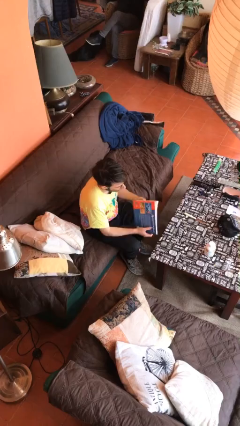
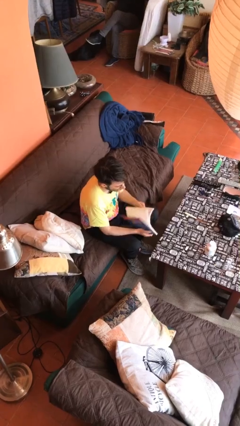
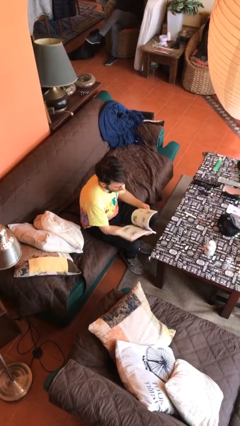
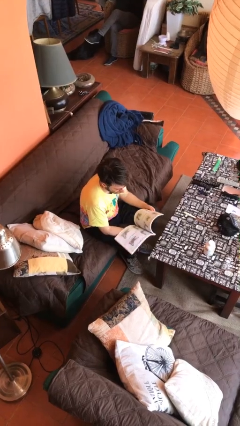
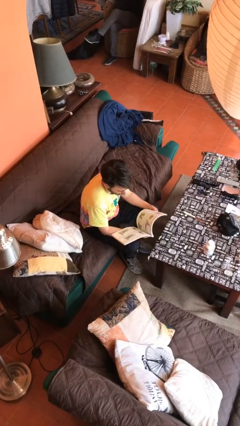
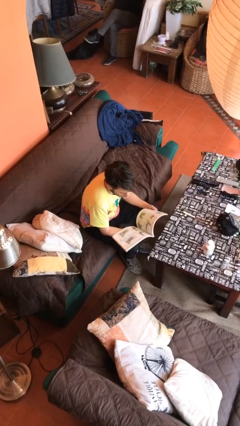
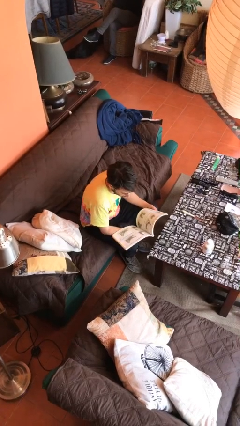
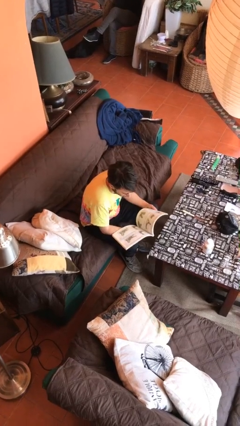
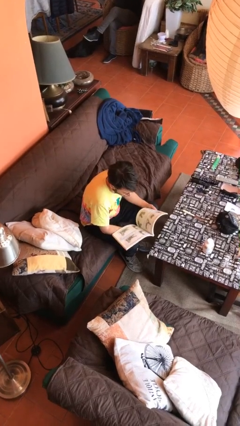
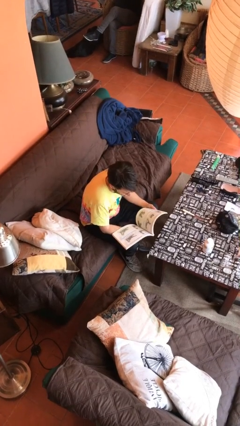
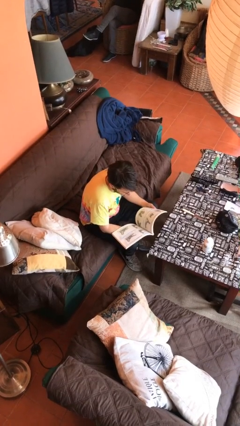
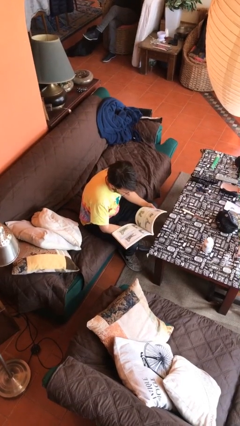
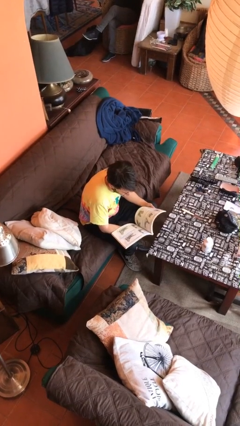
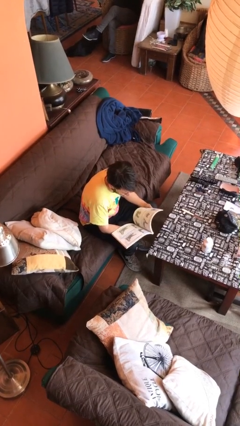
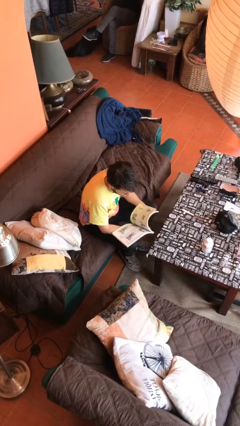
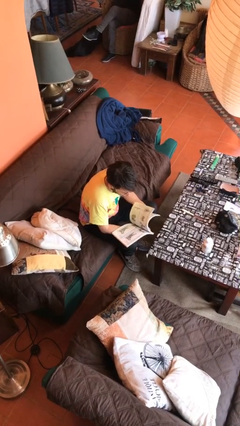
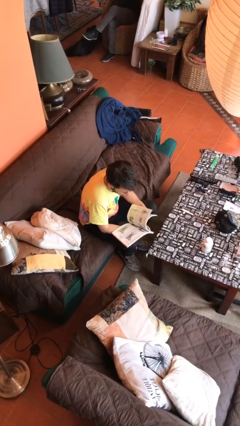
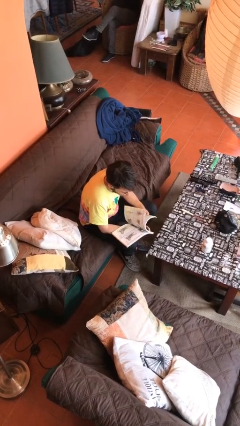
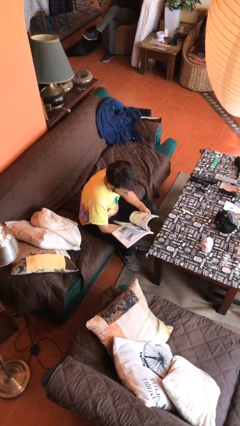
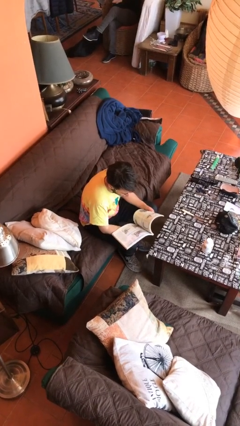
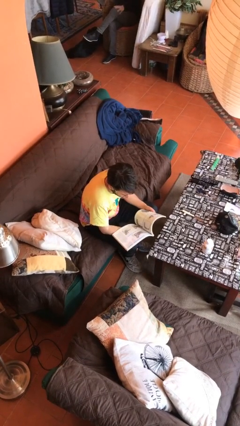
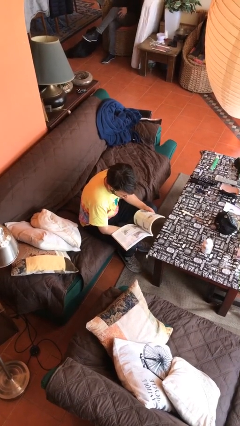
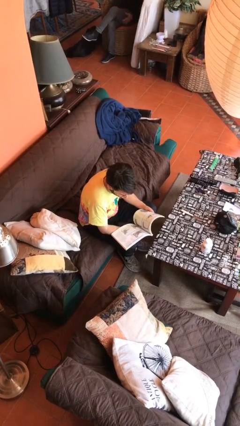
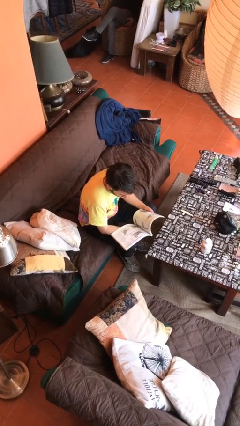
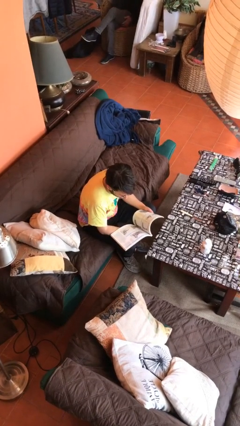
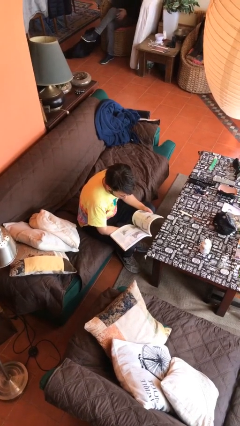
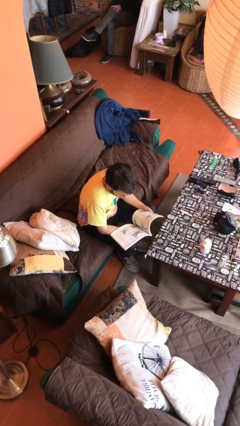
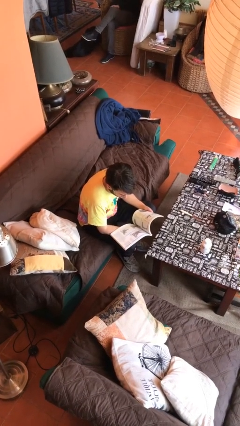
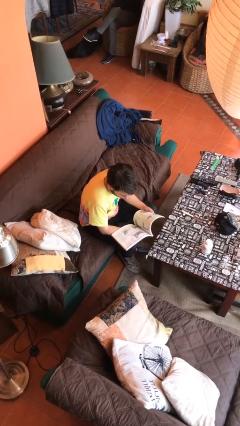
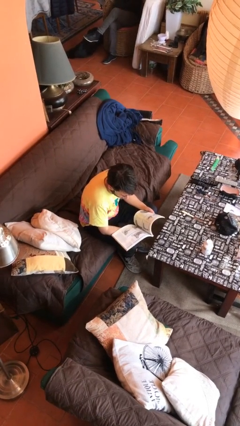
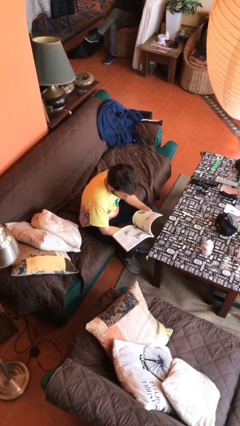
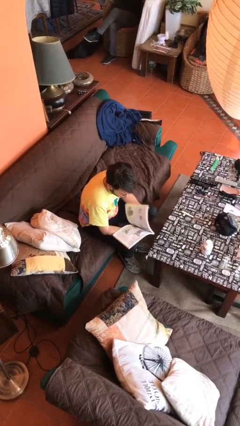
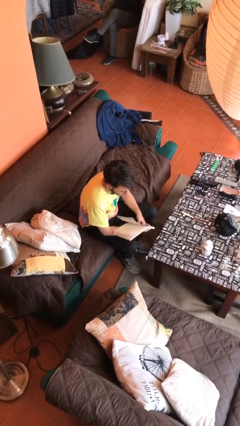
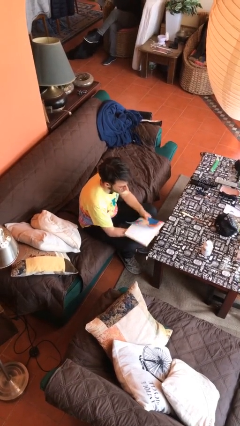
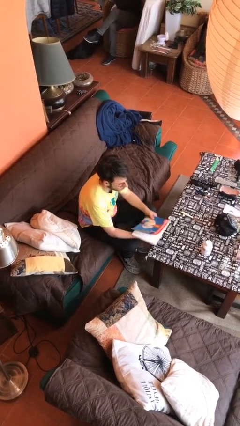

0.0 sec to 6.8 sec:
person reads document

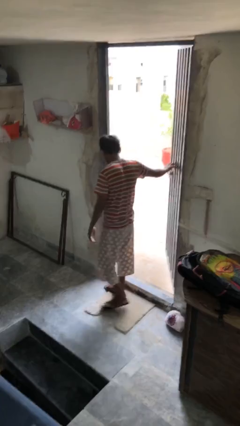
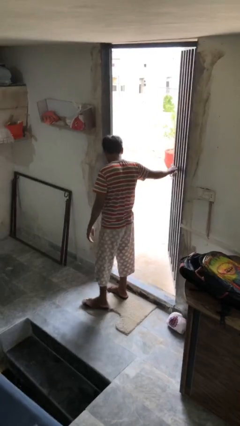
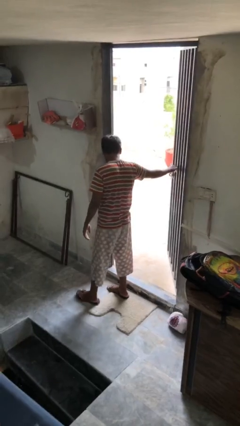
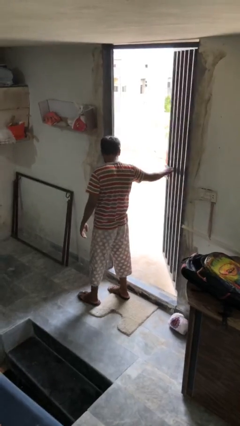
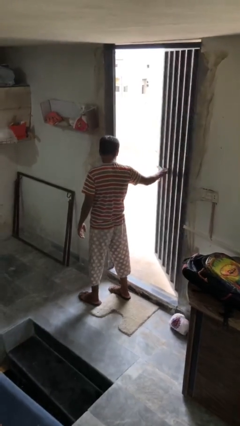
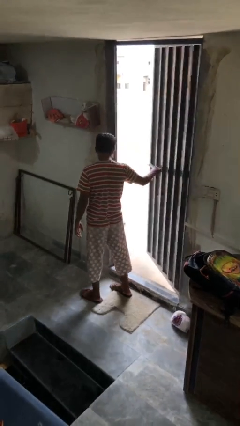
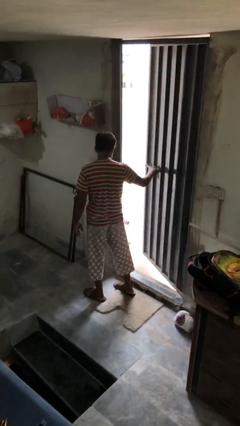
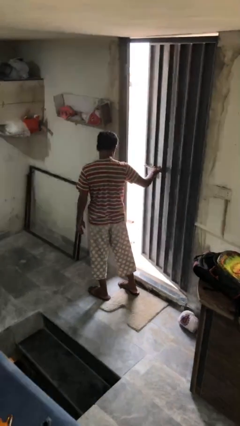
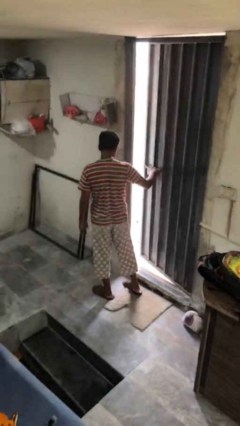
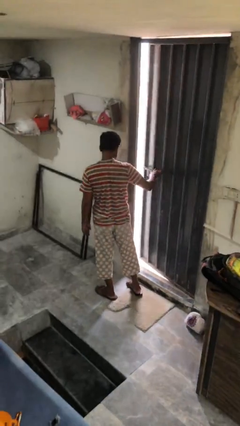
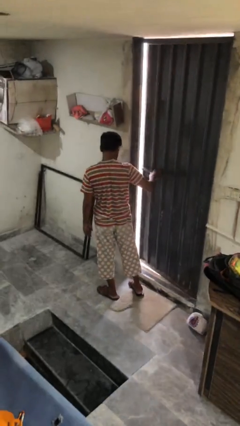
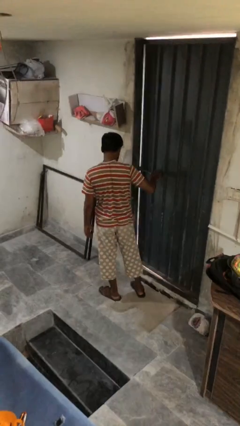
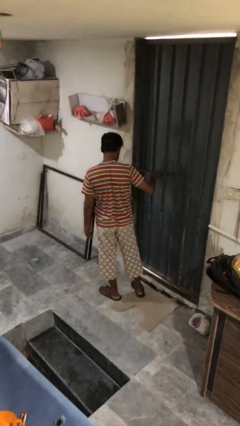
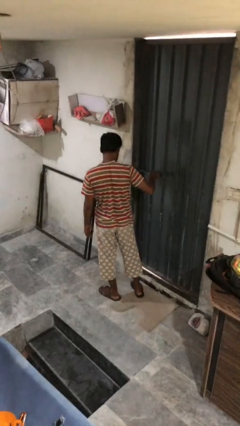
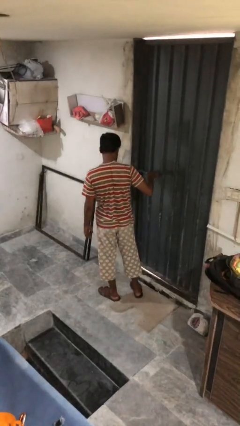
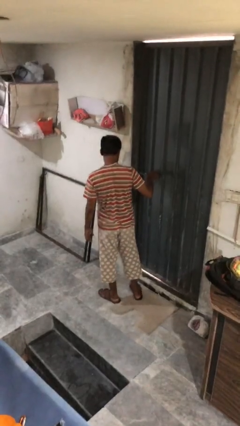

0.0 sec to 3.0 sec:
person closes facility door

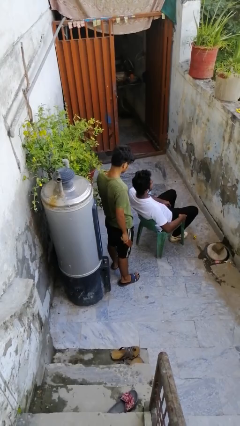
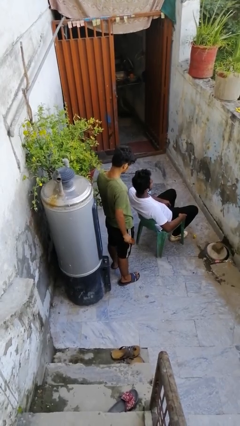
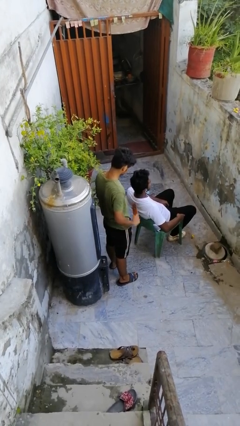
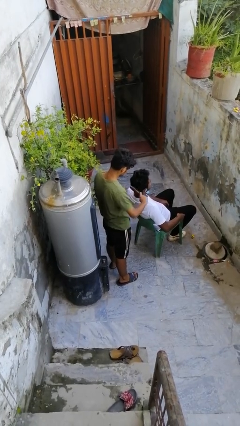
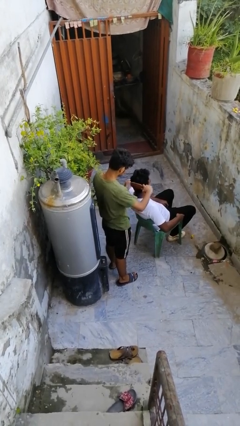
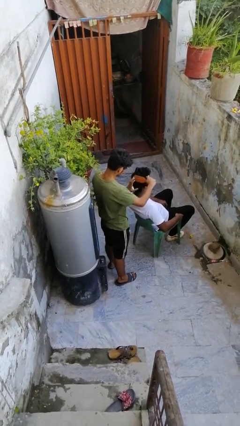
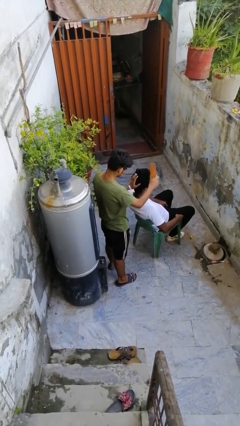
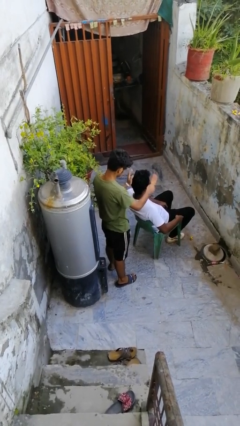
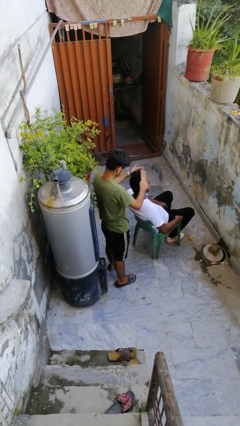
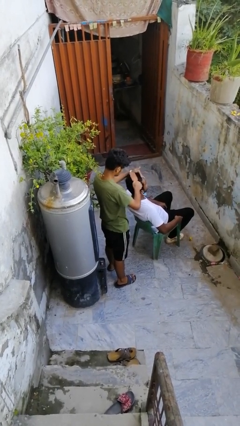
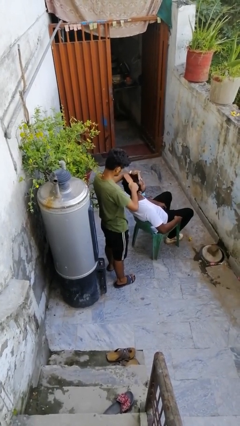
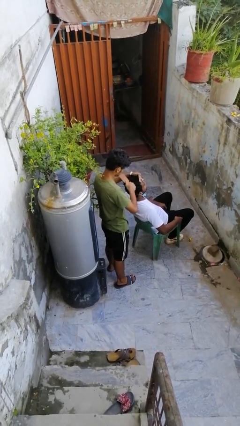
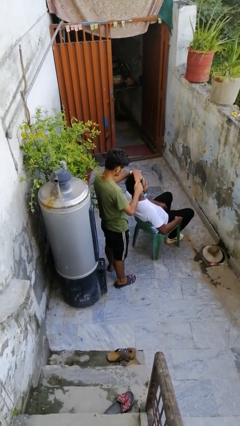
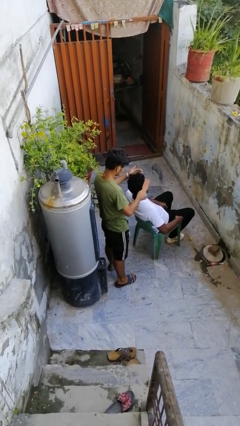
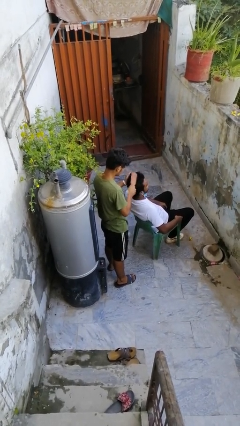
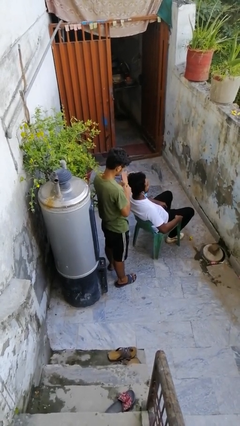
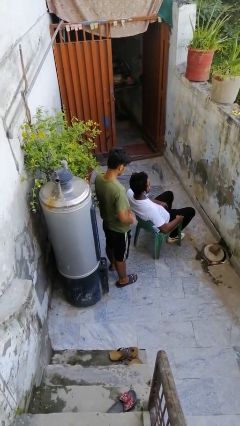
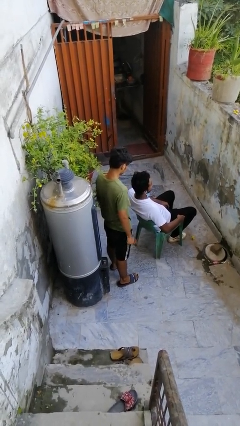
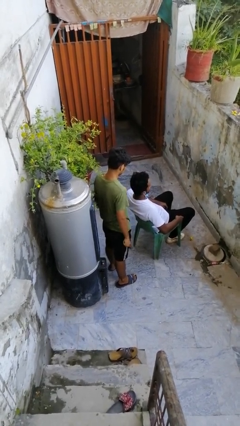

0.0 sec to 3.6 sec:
person brushes hair of person

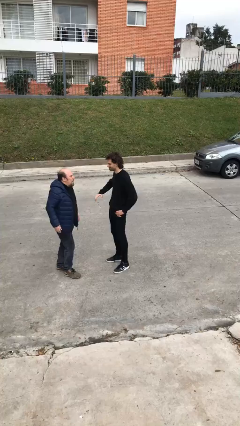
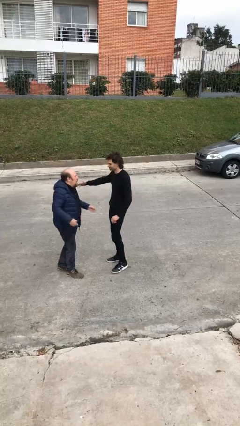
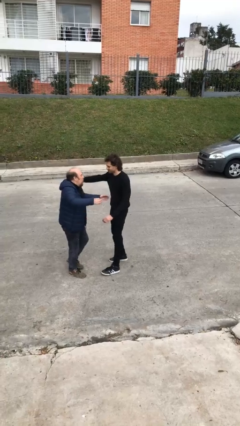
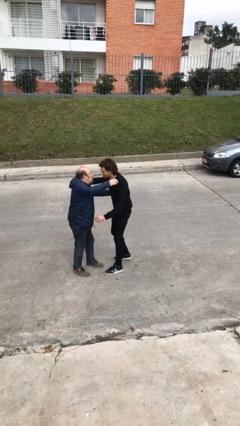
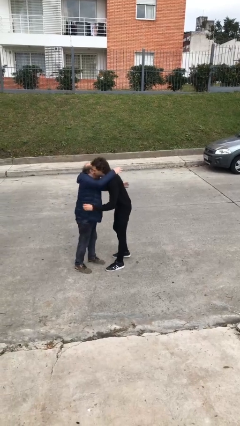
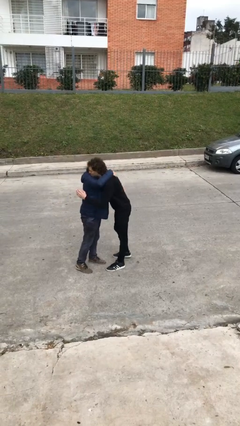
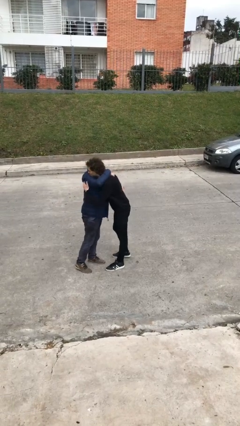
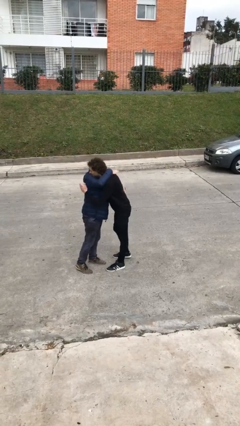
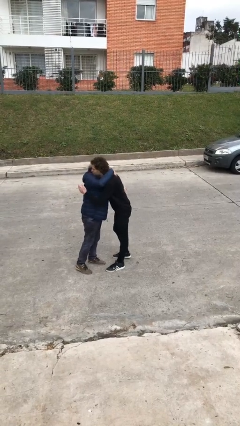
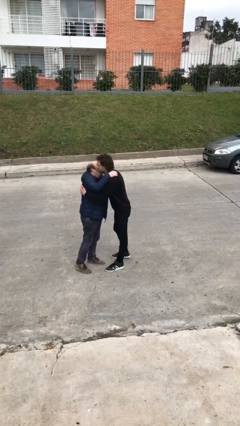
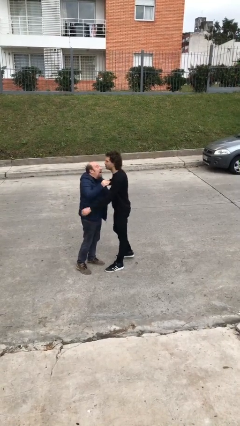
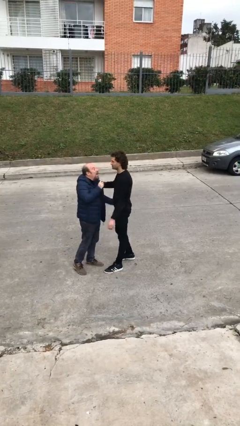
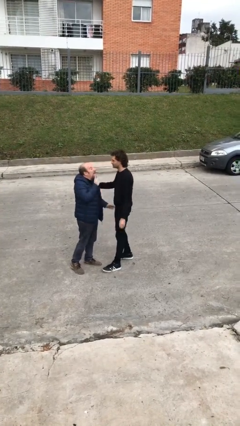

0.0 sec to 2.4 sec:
person embraces person

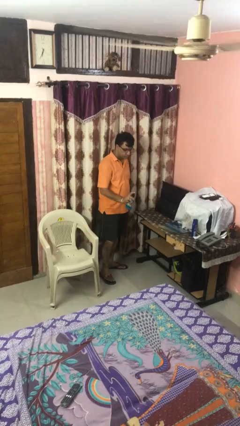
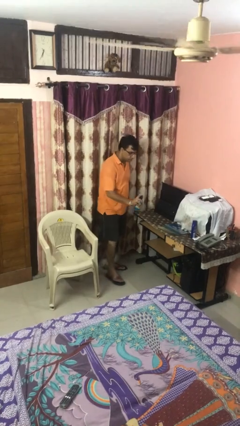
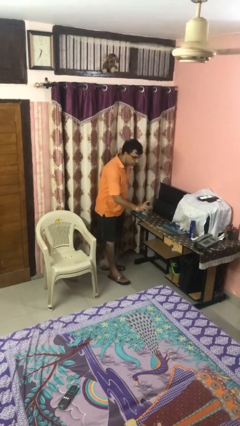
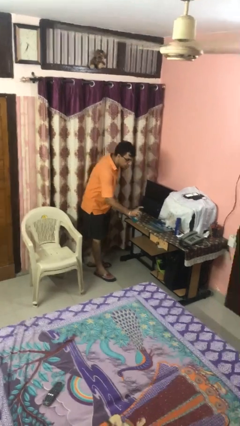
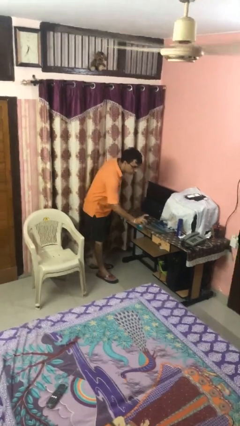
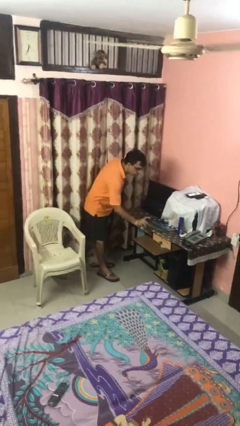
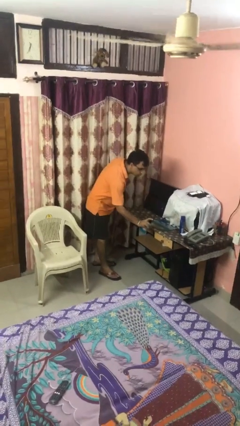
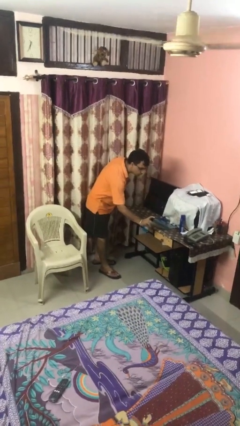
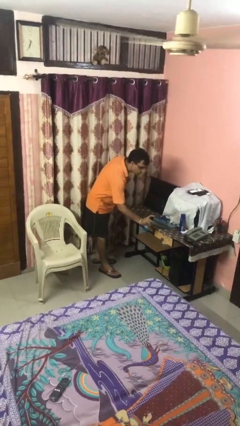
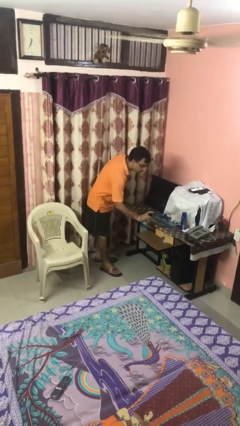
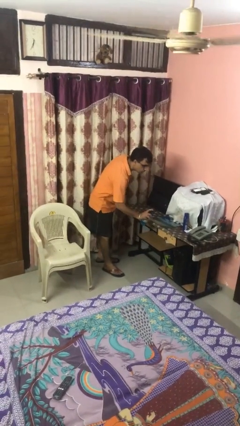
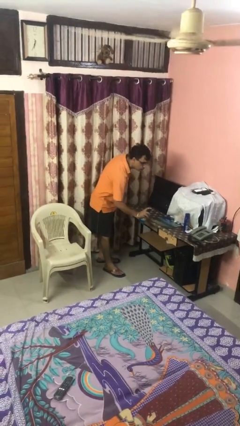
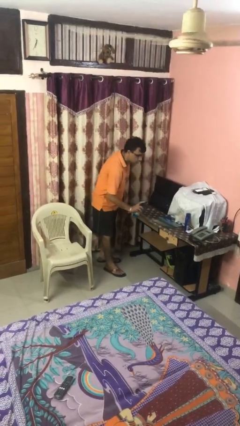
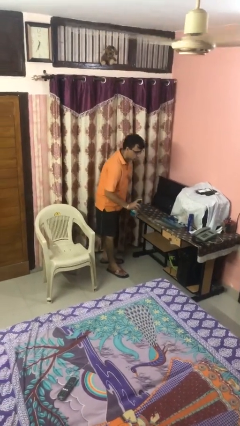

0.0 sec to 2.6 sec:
person sprays from bottle
